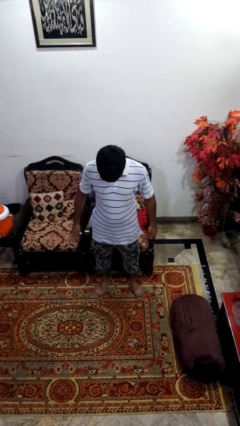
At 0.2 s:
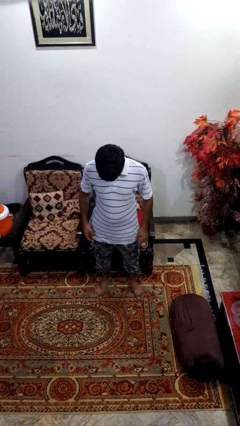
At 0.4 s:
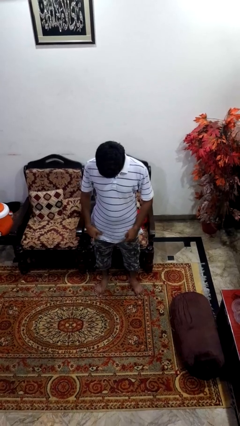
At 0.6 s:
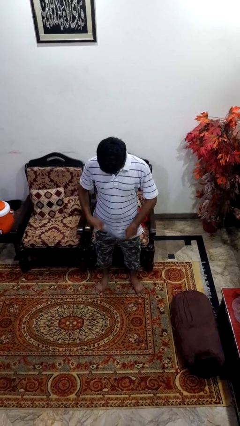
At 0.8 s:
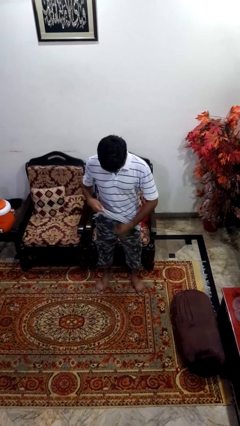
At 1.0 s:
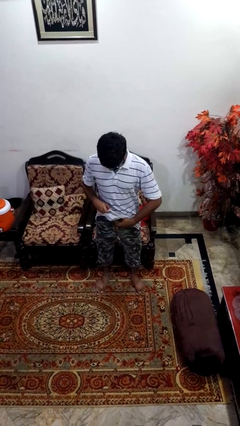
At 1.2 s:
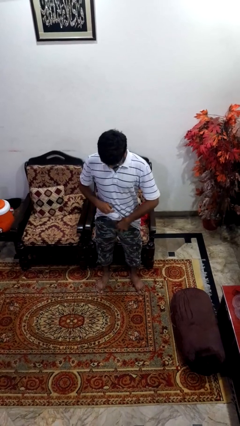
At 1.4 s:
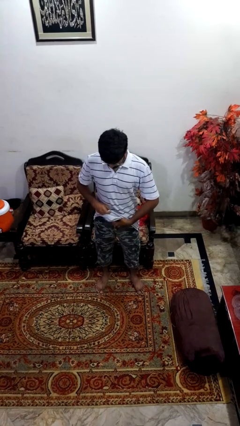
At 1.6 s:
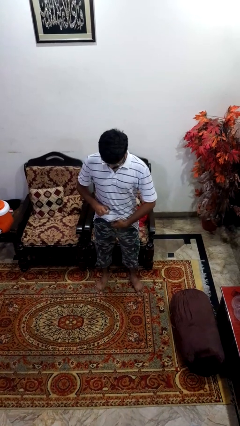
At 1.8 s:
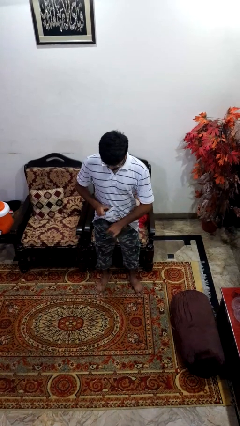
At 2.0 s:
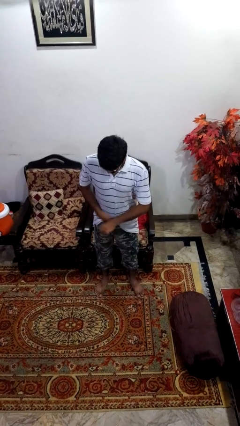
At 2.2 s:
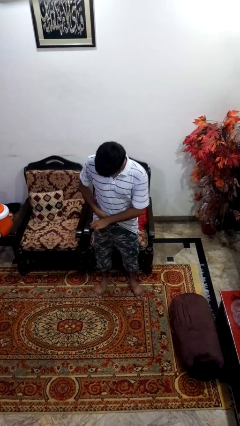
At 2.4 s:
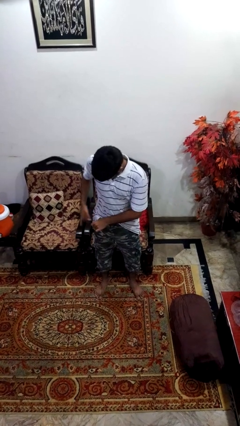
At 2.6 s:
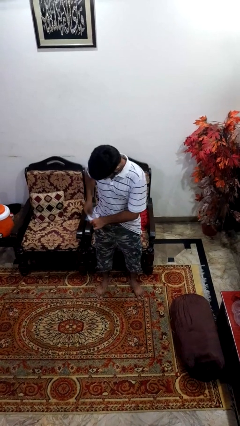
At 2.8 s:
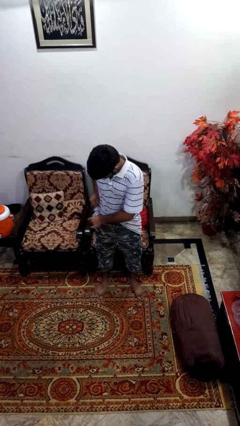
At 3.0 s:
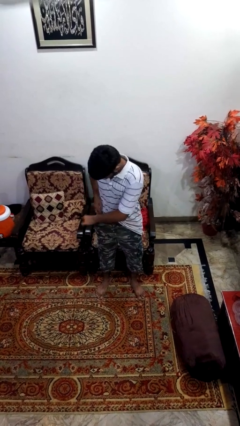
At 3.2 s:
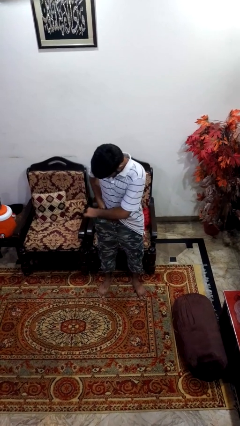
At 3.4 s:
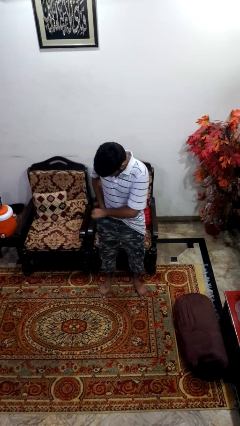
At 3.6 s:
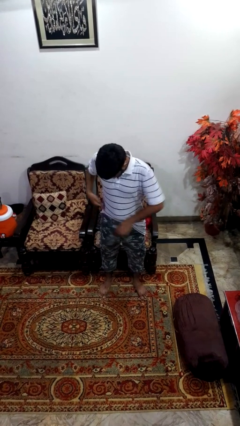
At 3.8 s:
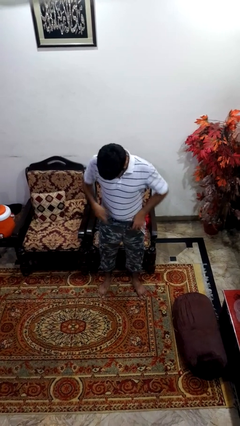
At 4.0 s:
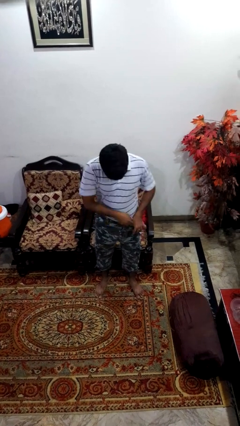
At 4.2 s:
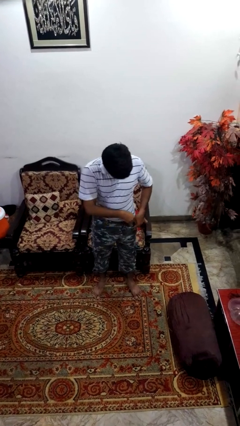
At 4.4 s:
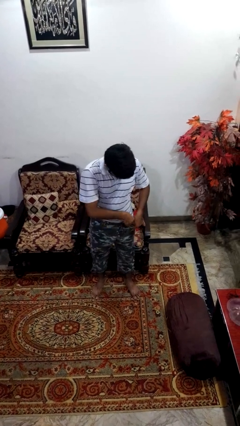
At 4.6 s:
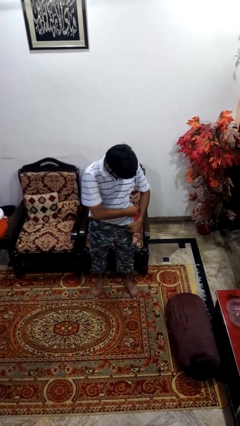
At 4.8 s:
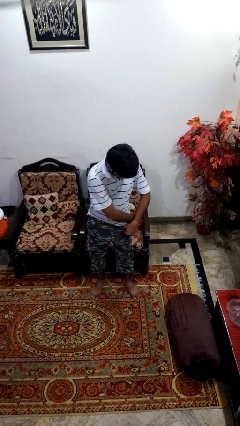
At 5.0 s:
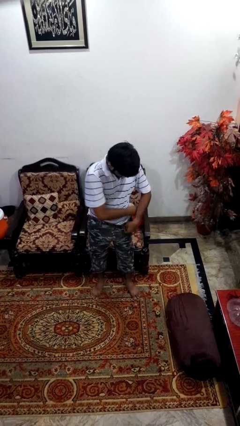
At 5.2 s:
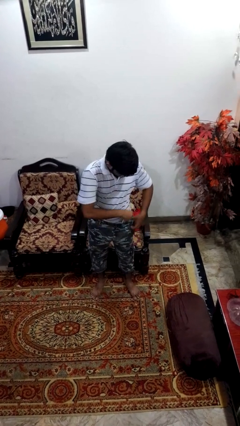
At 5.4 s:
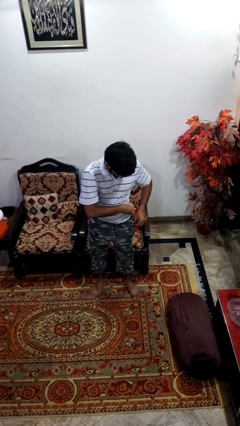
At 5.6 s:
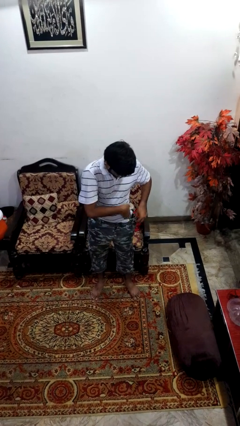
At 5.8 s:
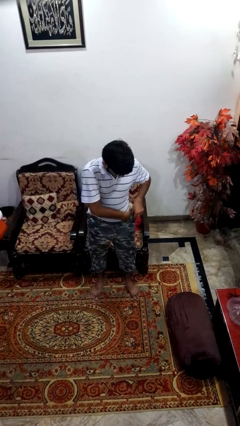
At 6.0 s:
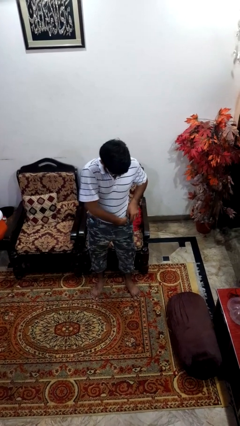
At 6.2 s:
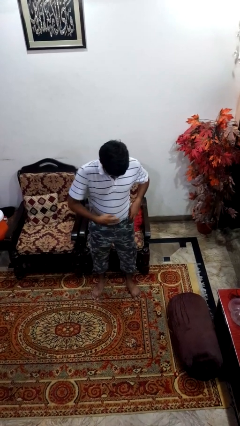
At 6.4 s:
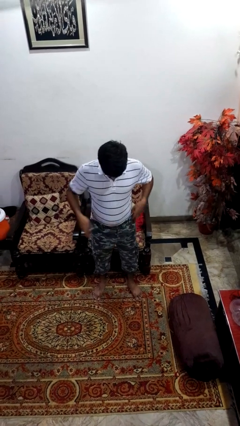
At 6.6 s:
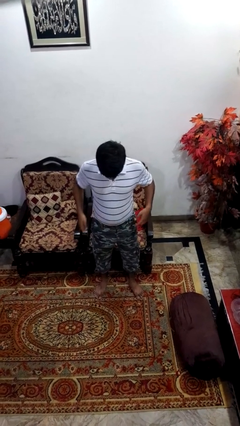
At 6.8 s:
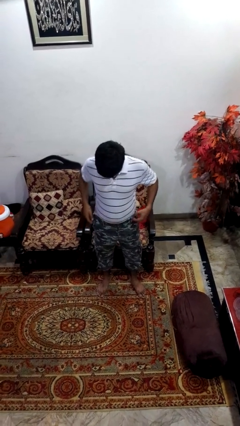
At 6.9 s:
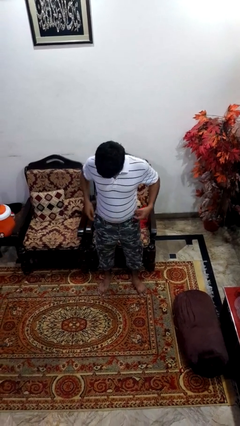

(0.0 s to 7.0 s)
person tucks in shirt

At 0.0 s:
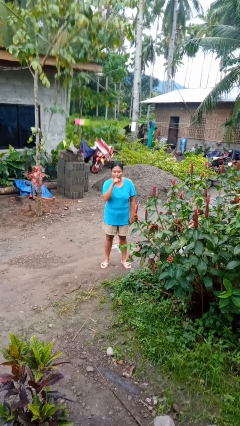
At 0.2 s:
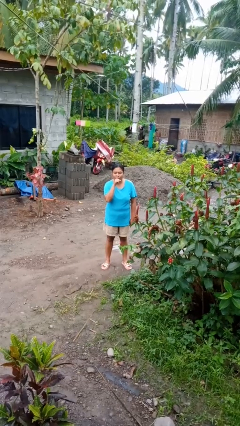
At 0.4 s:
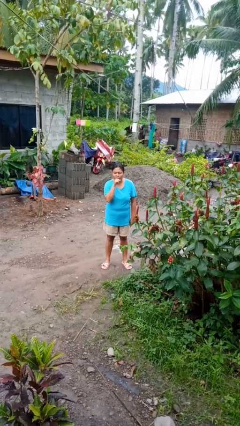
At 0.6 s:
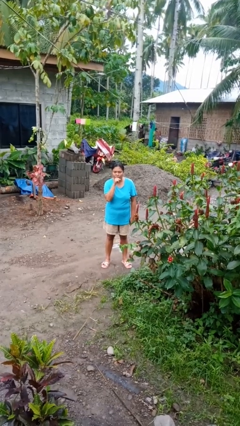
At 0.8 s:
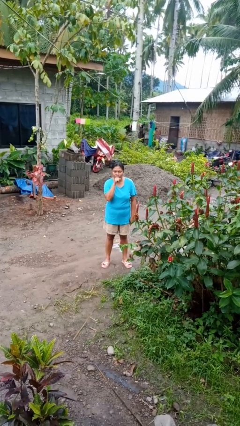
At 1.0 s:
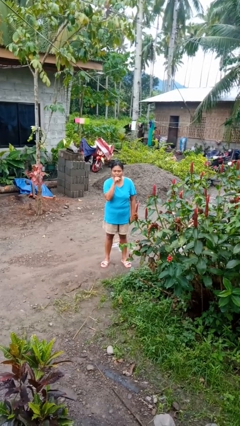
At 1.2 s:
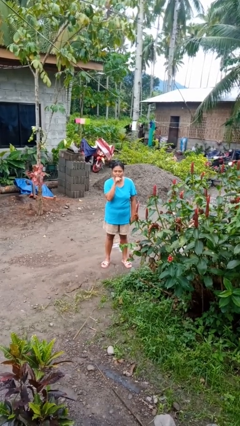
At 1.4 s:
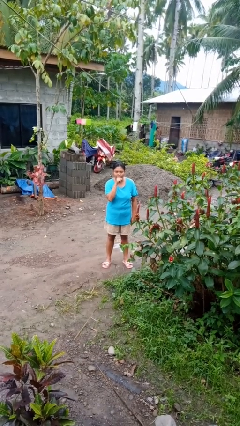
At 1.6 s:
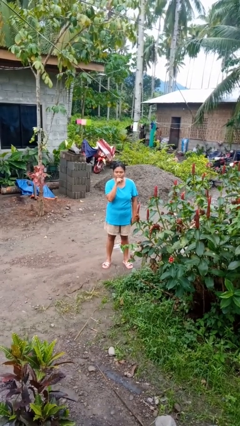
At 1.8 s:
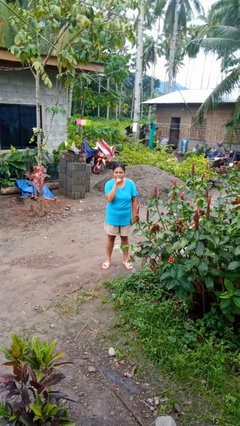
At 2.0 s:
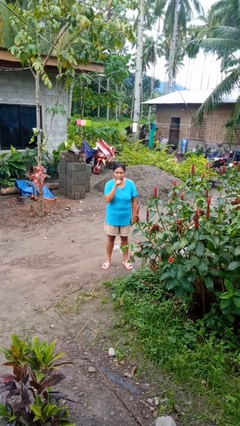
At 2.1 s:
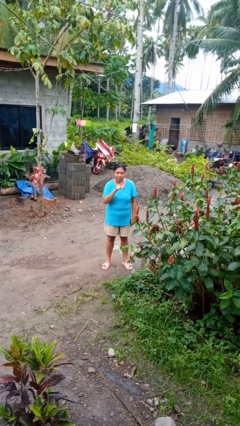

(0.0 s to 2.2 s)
person gestures be quiet

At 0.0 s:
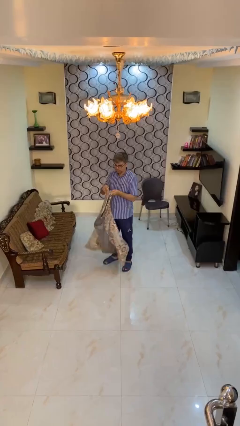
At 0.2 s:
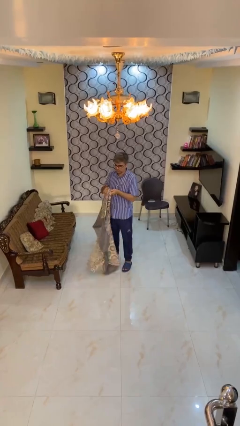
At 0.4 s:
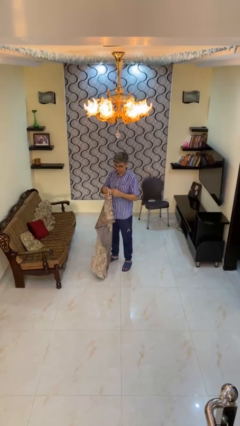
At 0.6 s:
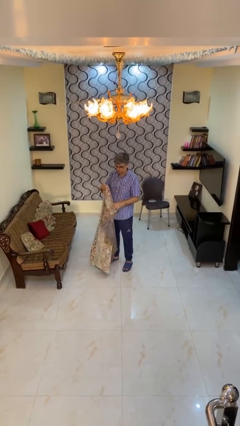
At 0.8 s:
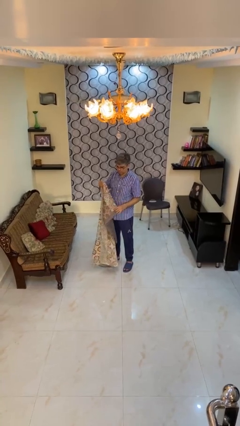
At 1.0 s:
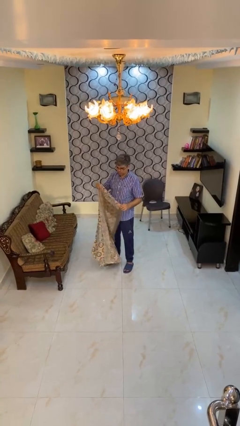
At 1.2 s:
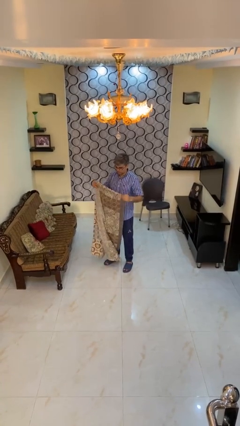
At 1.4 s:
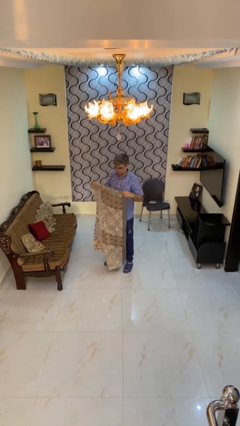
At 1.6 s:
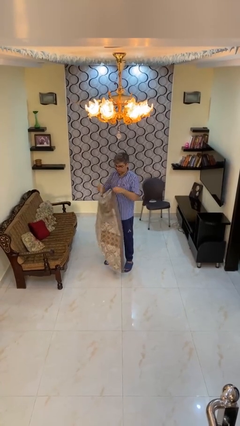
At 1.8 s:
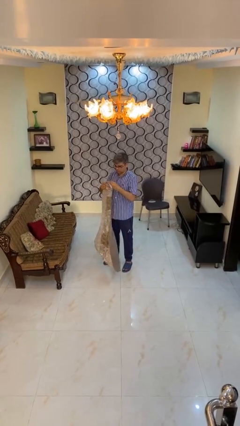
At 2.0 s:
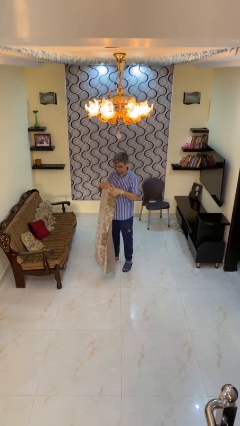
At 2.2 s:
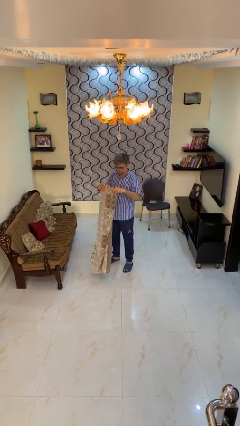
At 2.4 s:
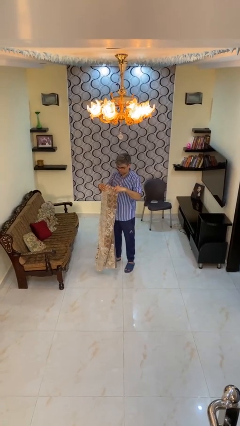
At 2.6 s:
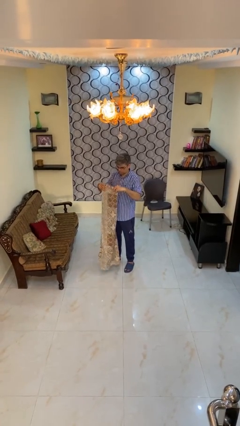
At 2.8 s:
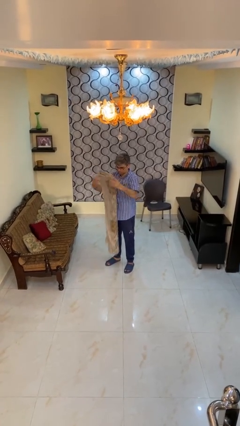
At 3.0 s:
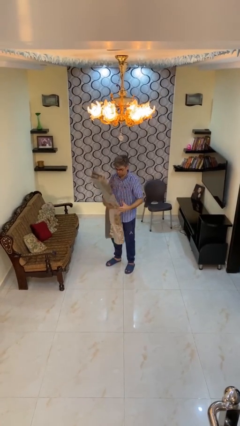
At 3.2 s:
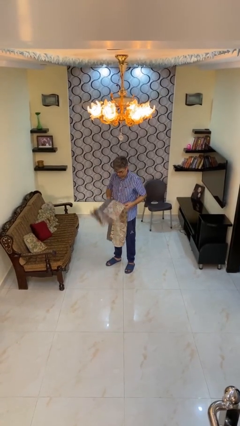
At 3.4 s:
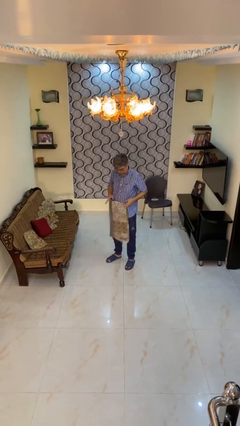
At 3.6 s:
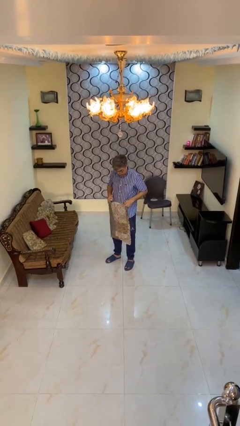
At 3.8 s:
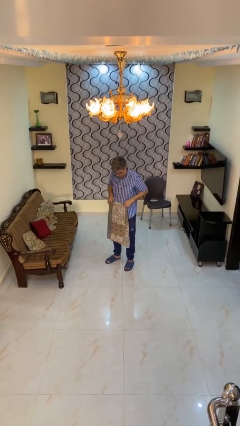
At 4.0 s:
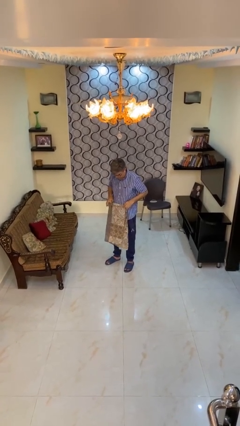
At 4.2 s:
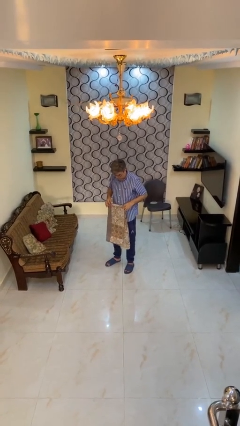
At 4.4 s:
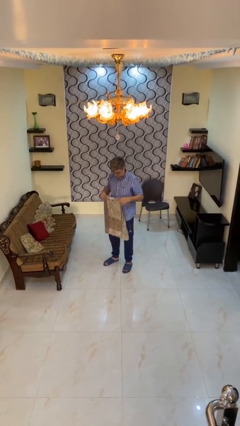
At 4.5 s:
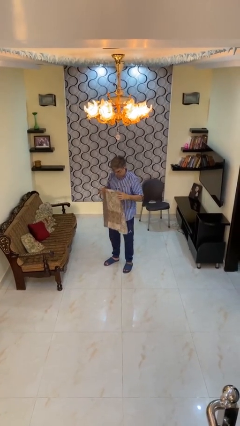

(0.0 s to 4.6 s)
person folds blanket

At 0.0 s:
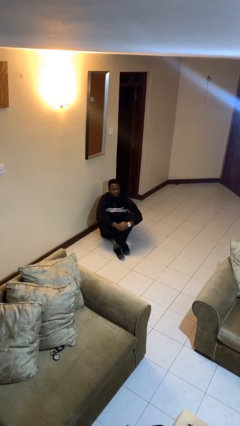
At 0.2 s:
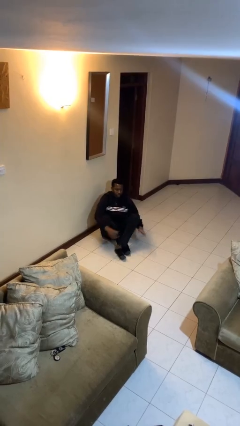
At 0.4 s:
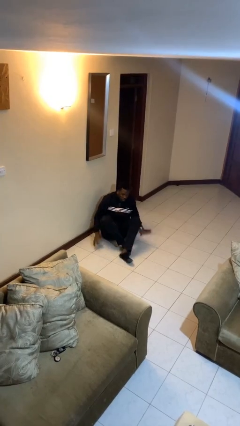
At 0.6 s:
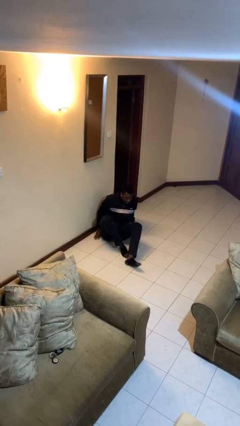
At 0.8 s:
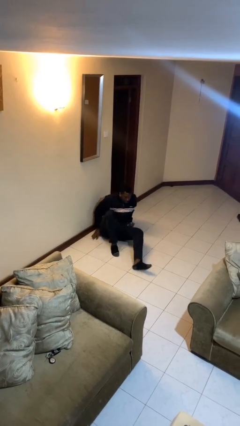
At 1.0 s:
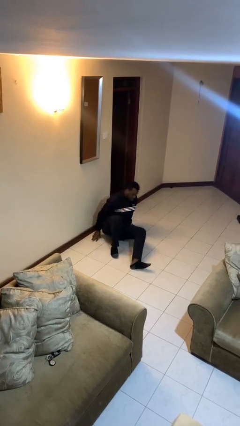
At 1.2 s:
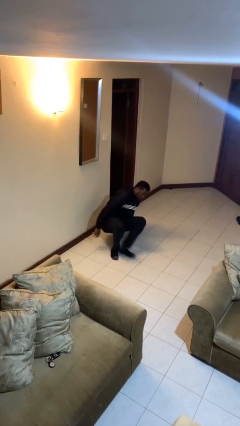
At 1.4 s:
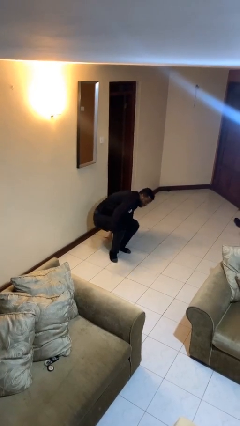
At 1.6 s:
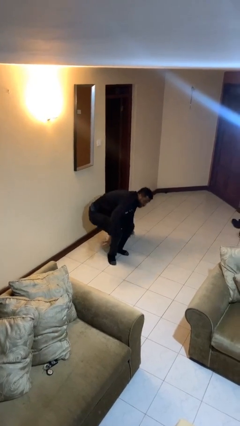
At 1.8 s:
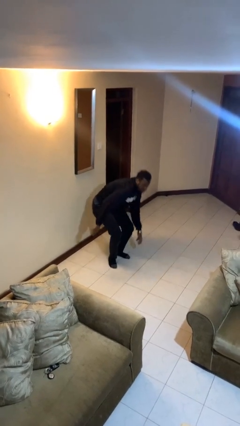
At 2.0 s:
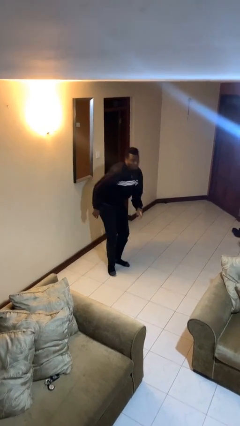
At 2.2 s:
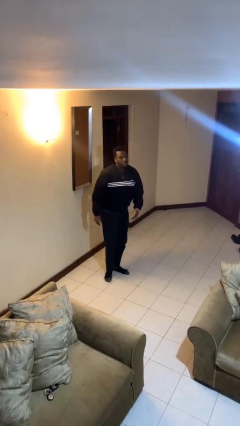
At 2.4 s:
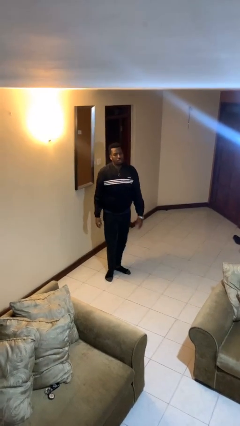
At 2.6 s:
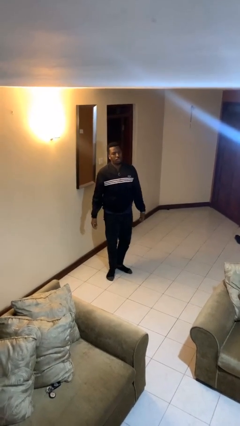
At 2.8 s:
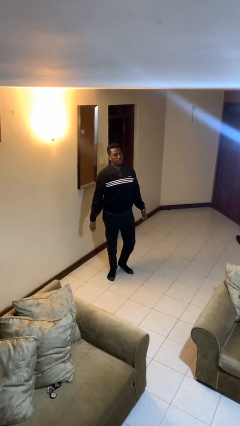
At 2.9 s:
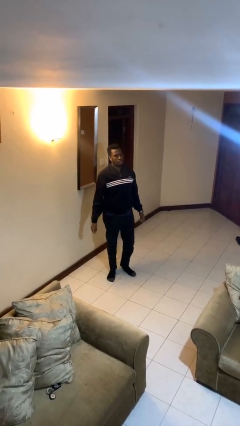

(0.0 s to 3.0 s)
person stands up from floor

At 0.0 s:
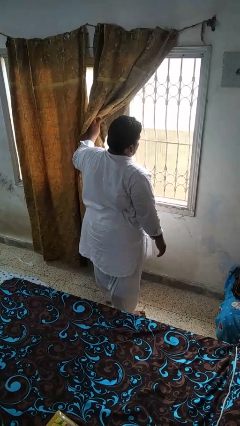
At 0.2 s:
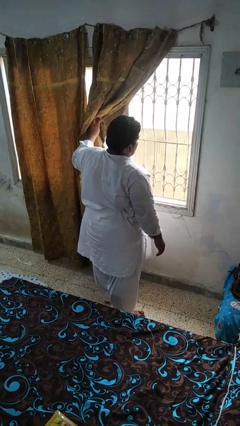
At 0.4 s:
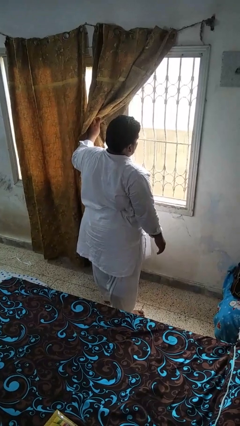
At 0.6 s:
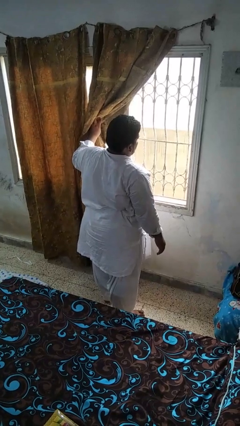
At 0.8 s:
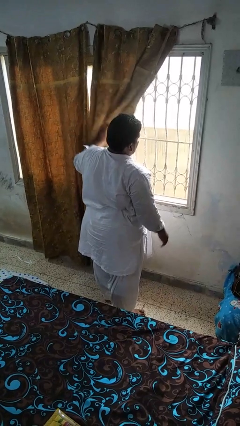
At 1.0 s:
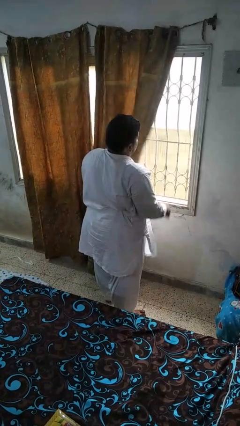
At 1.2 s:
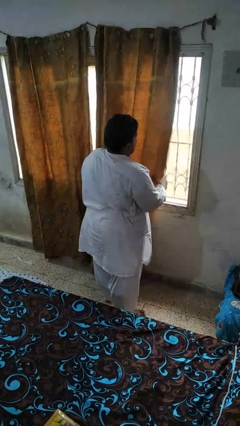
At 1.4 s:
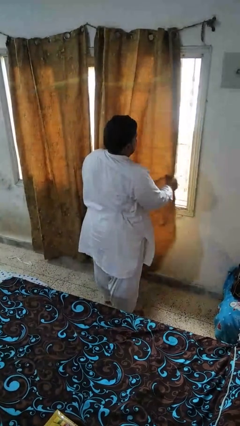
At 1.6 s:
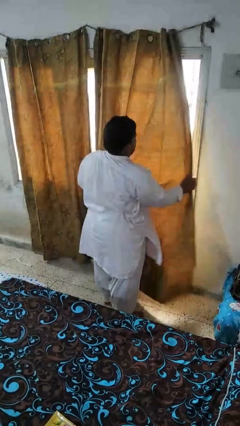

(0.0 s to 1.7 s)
person closes curtains
